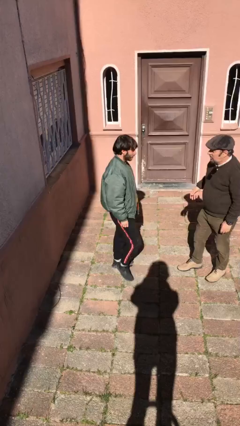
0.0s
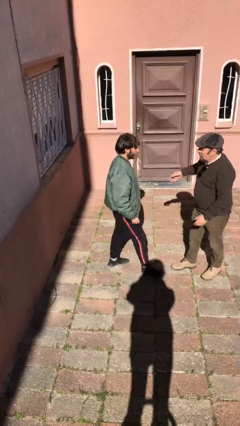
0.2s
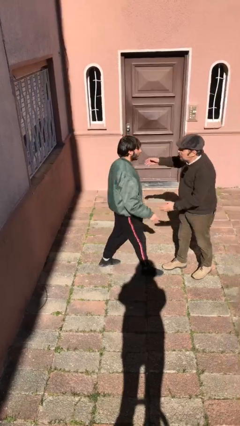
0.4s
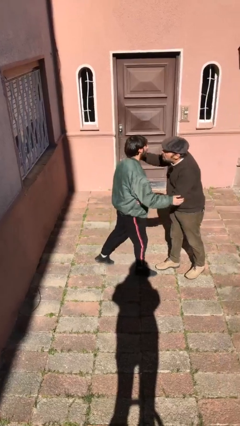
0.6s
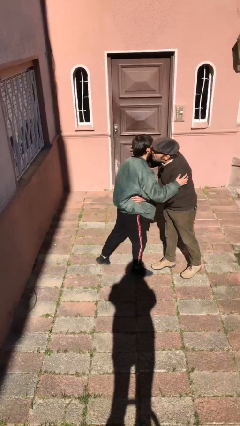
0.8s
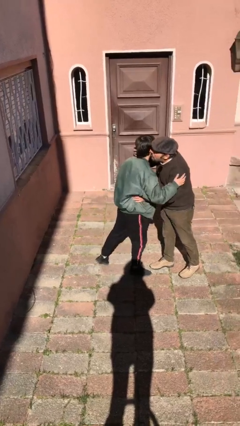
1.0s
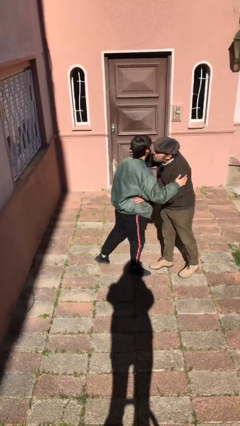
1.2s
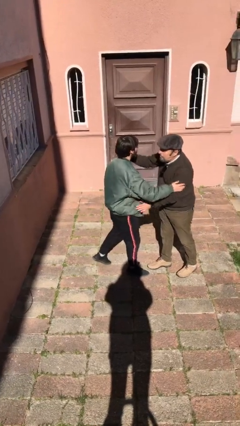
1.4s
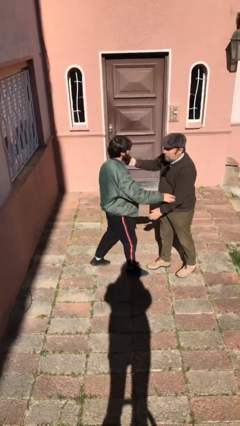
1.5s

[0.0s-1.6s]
person kisses cheek of person

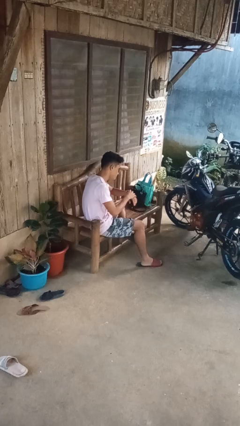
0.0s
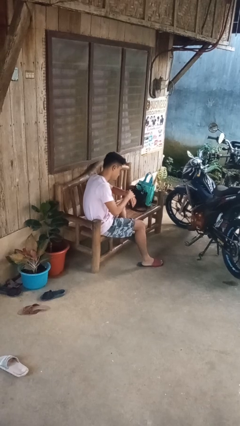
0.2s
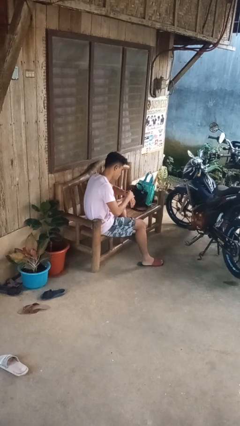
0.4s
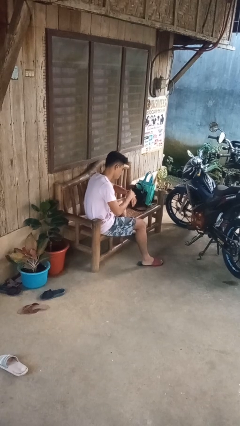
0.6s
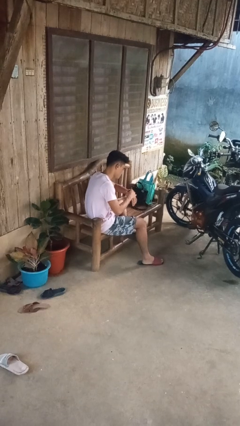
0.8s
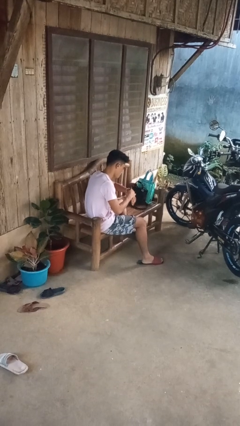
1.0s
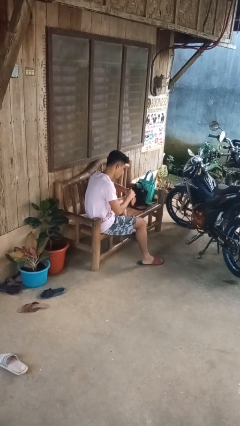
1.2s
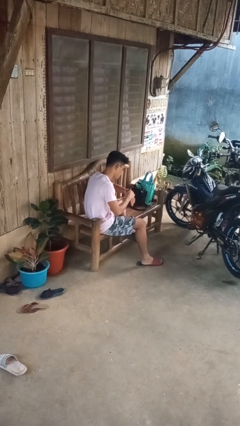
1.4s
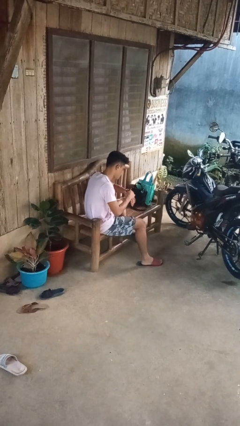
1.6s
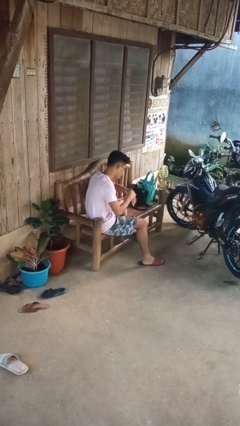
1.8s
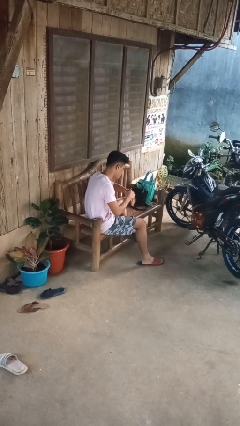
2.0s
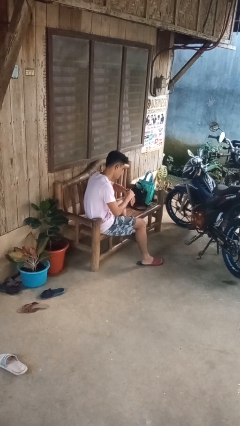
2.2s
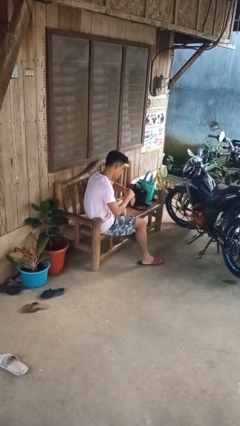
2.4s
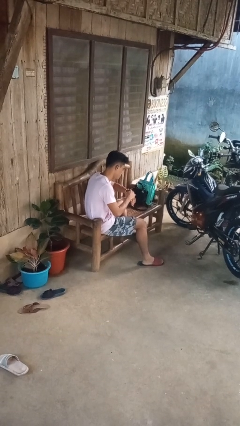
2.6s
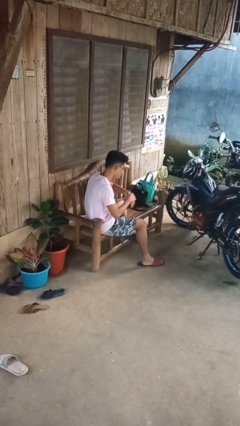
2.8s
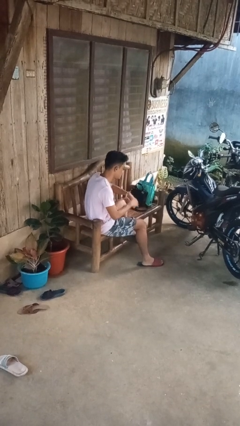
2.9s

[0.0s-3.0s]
person looks at wristwatch

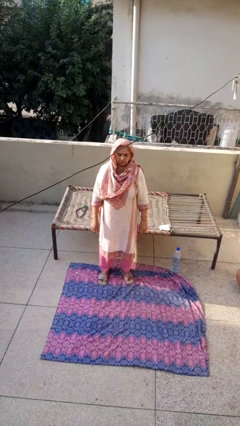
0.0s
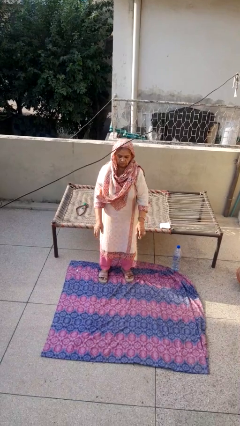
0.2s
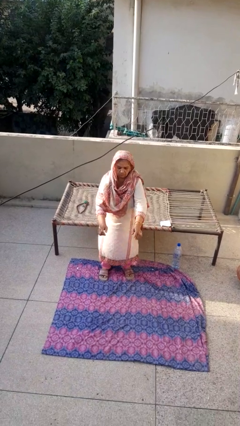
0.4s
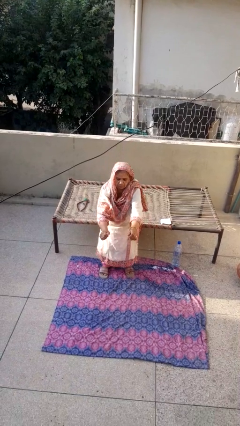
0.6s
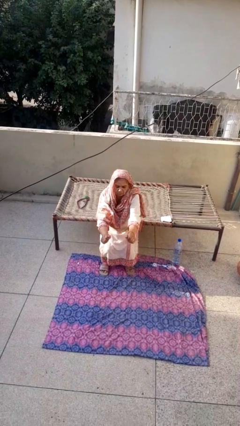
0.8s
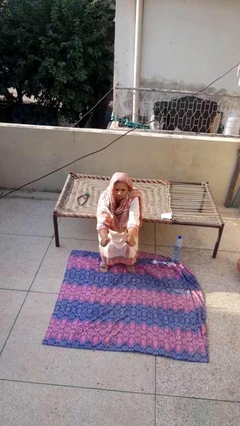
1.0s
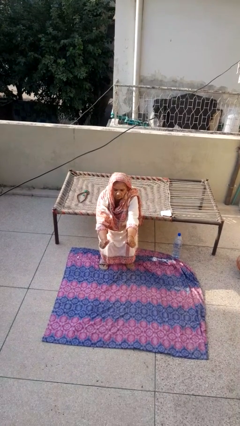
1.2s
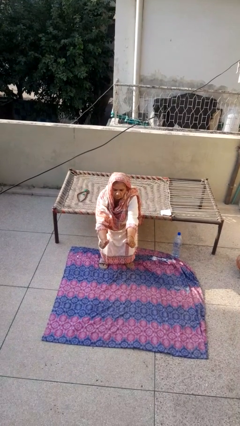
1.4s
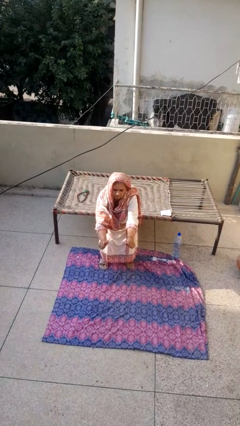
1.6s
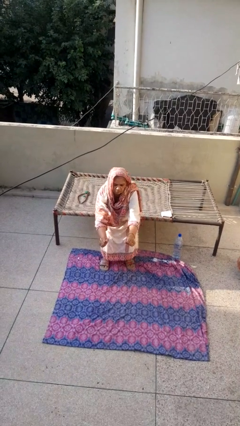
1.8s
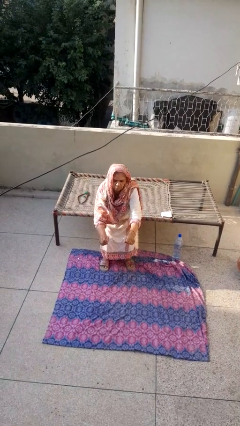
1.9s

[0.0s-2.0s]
person squats

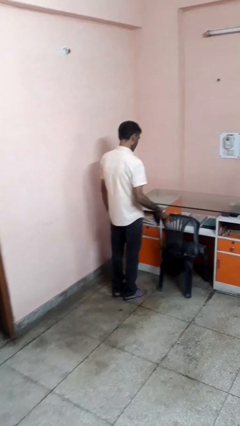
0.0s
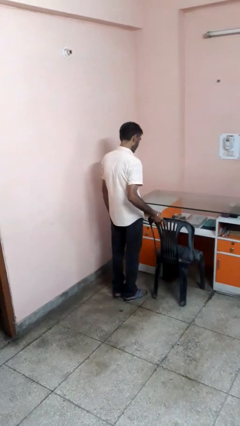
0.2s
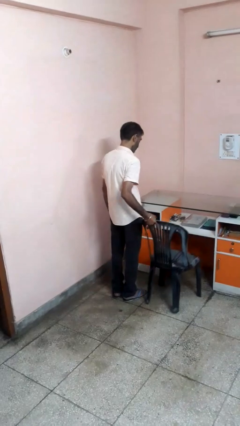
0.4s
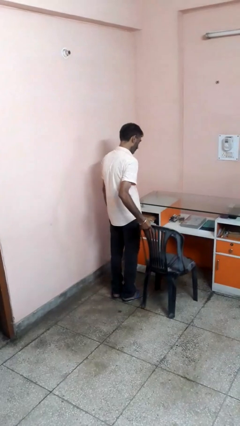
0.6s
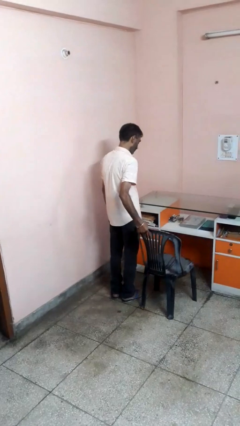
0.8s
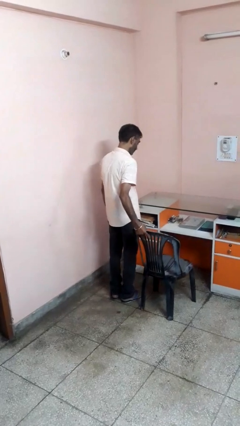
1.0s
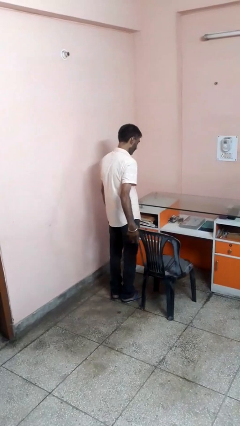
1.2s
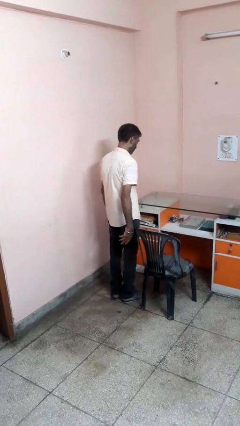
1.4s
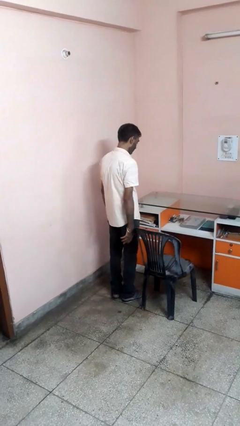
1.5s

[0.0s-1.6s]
person pulls out chair

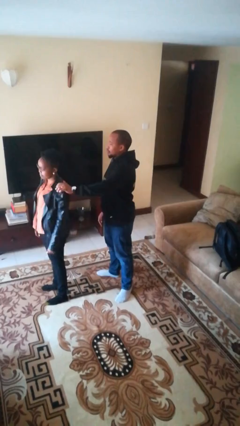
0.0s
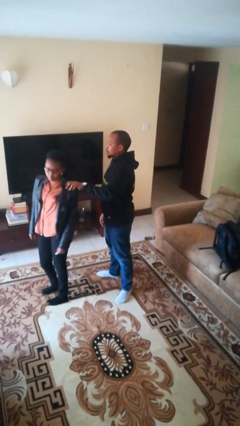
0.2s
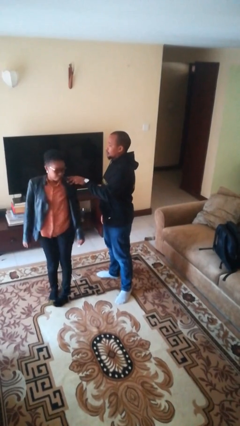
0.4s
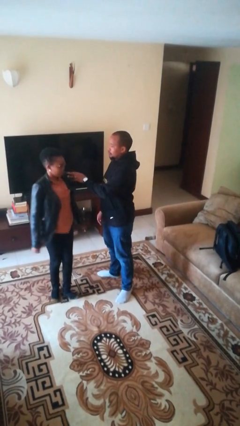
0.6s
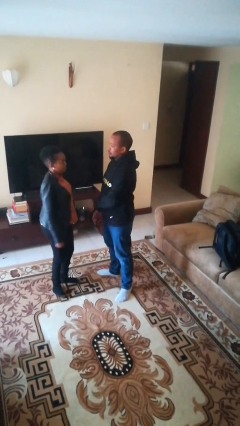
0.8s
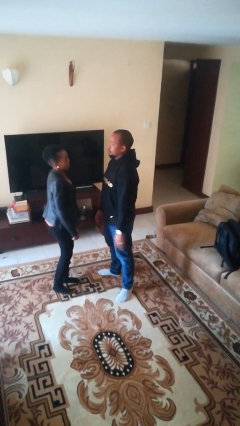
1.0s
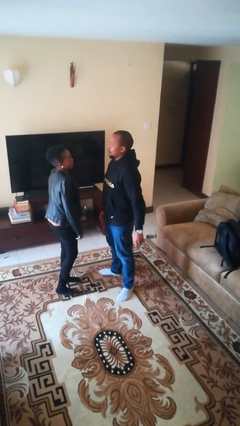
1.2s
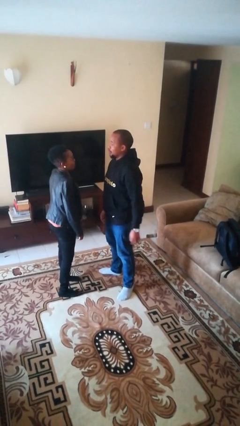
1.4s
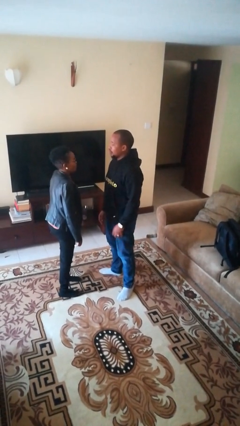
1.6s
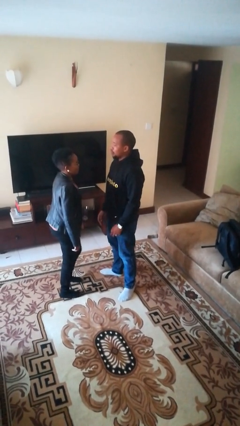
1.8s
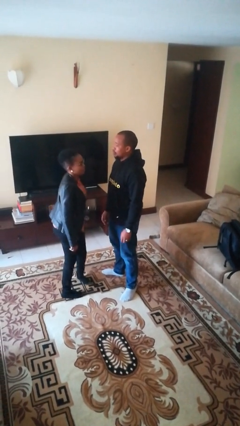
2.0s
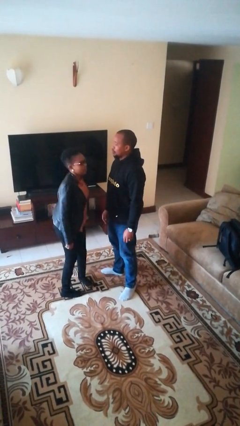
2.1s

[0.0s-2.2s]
person spins person around

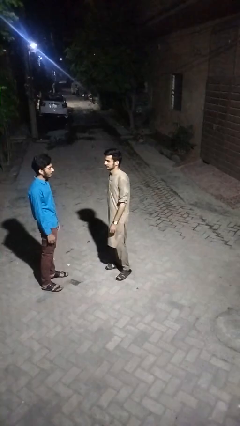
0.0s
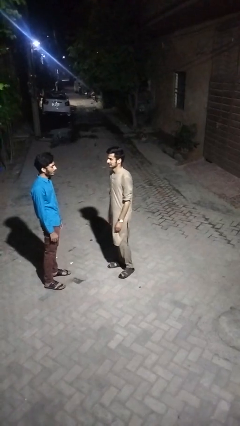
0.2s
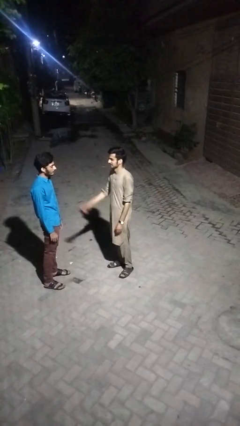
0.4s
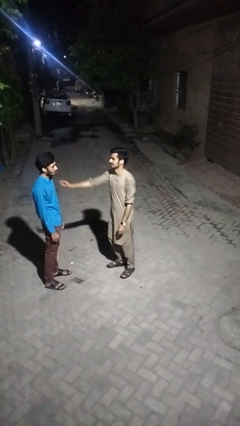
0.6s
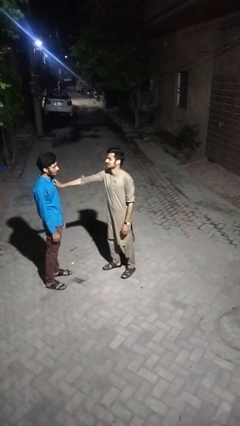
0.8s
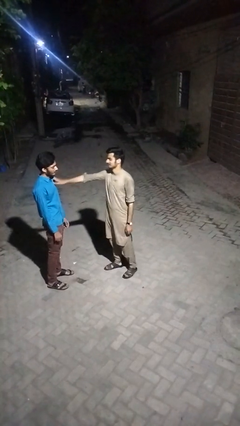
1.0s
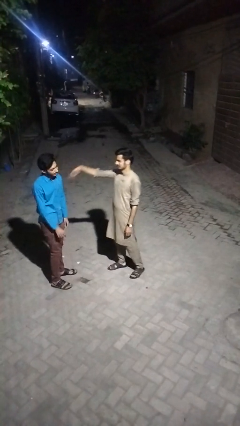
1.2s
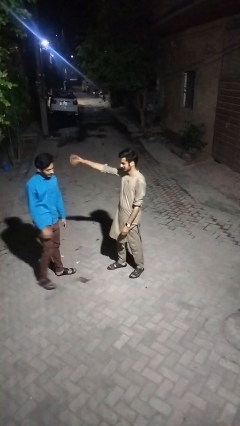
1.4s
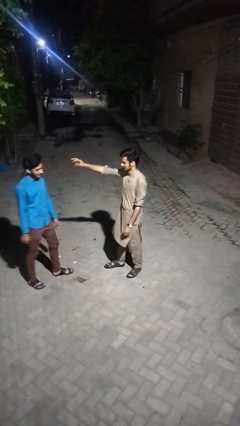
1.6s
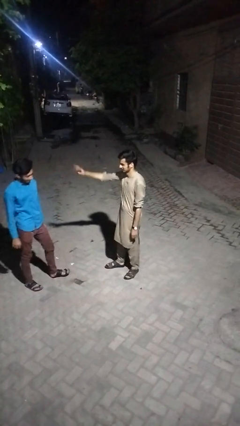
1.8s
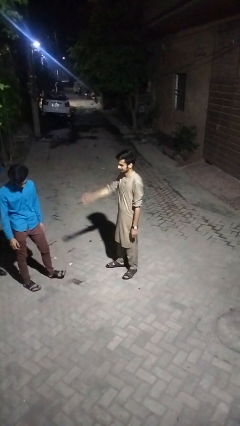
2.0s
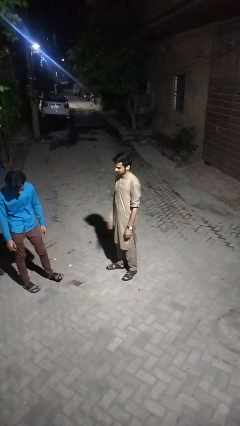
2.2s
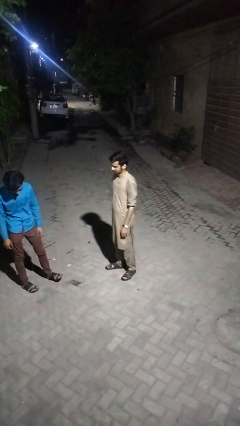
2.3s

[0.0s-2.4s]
person shoves person

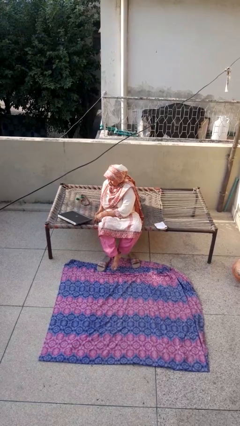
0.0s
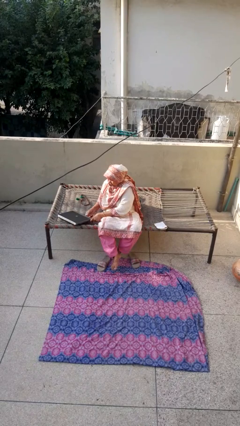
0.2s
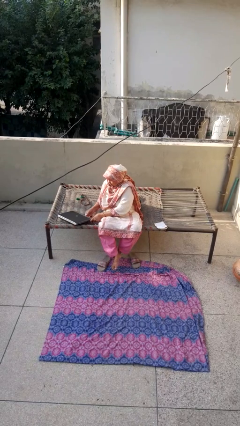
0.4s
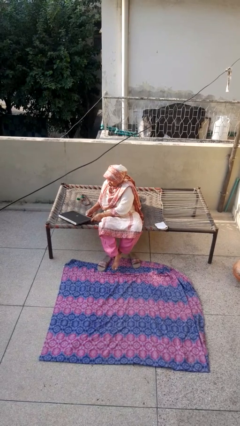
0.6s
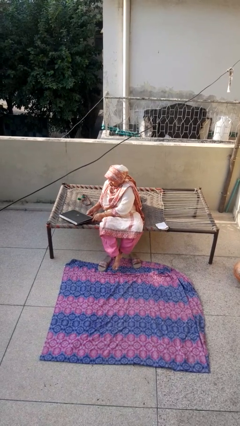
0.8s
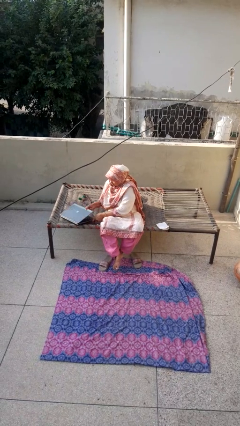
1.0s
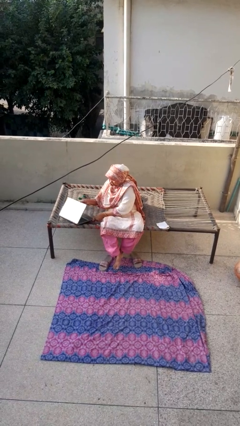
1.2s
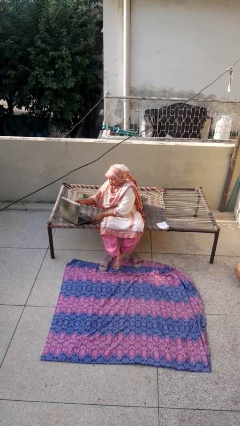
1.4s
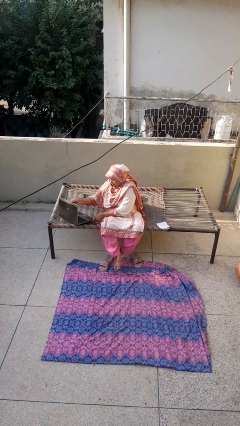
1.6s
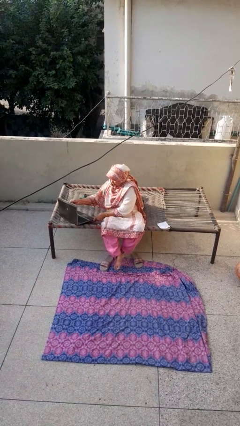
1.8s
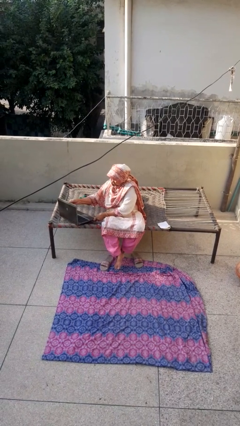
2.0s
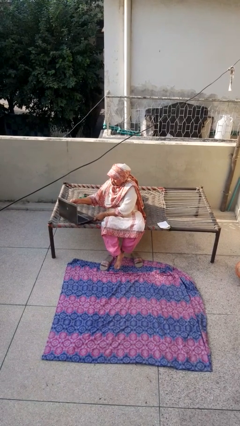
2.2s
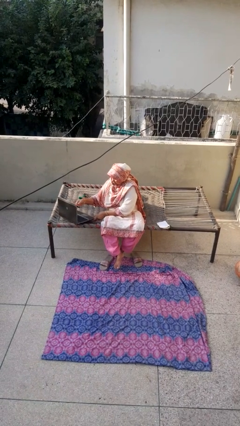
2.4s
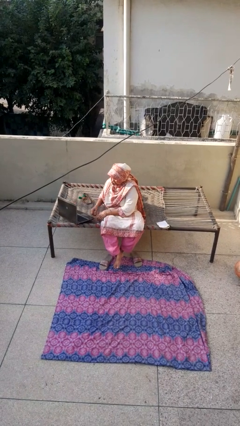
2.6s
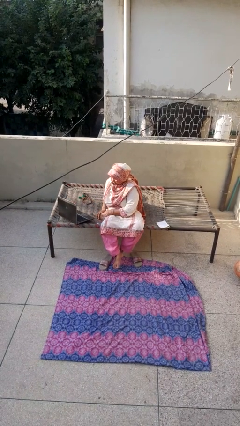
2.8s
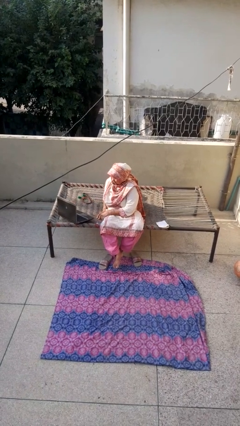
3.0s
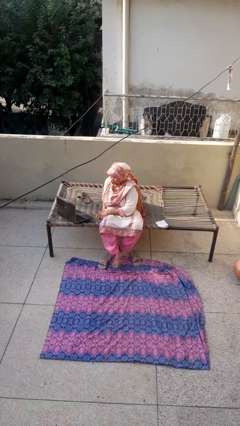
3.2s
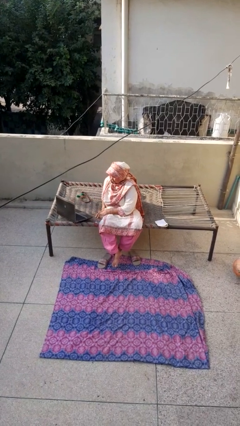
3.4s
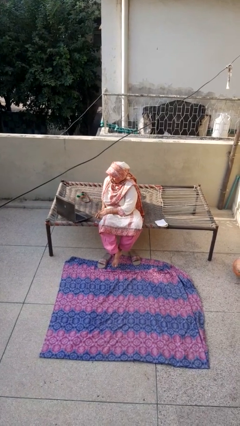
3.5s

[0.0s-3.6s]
person opens laptop

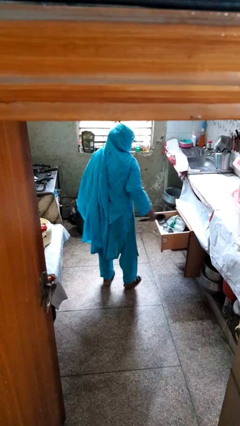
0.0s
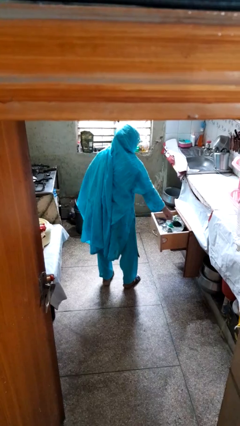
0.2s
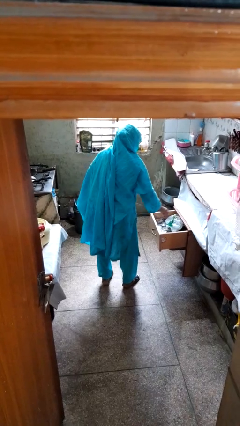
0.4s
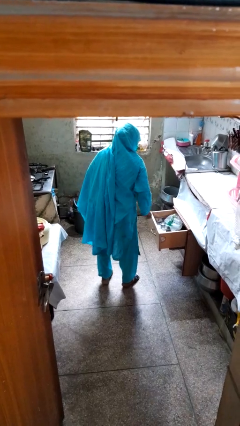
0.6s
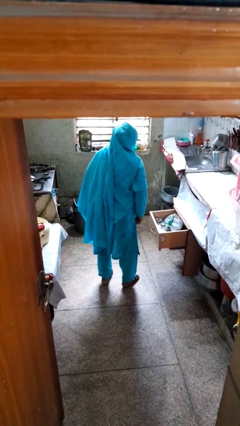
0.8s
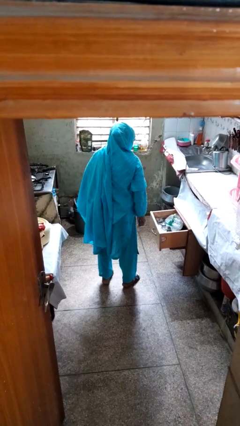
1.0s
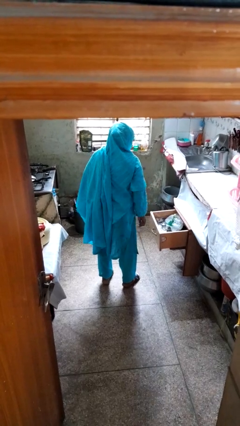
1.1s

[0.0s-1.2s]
person puts object into kitchen drawer
